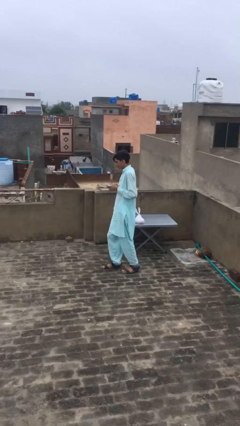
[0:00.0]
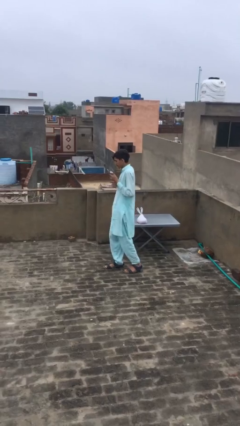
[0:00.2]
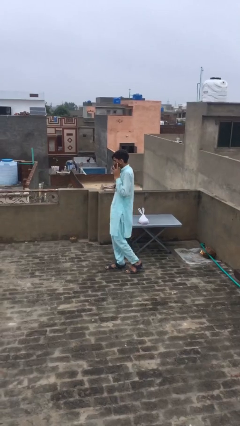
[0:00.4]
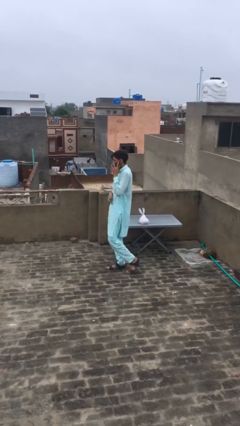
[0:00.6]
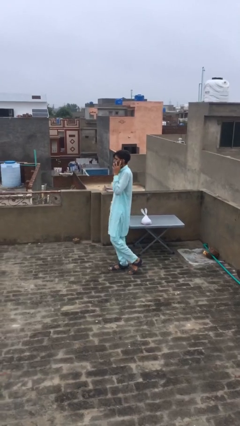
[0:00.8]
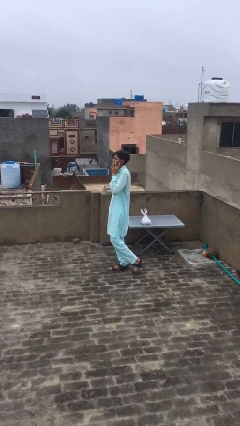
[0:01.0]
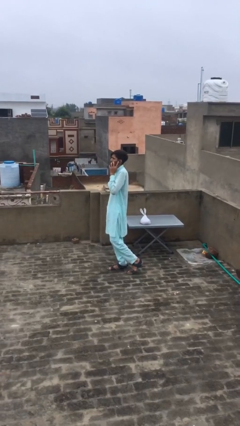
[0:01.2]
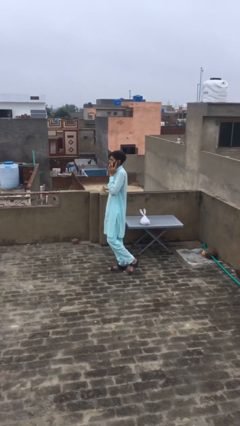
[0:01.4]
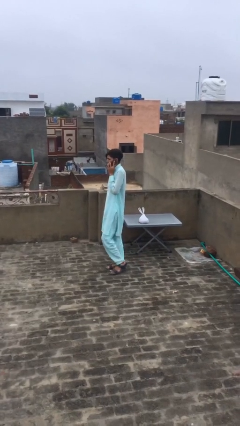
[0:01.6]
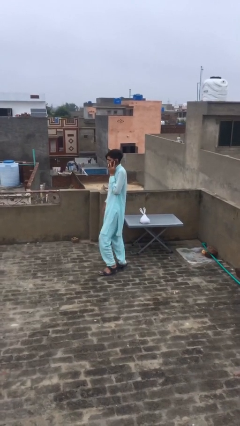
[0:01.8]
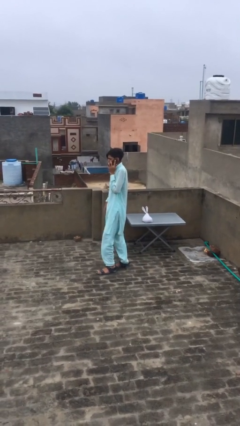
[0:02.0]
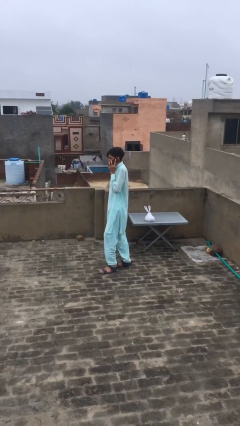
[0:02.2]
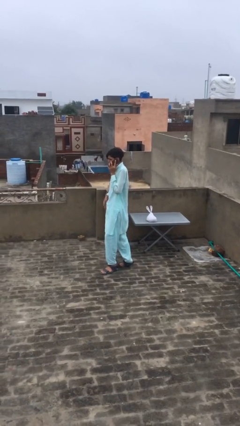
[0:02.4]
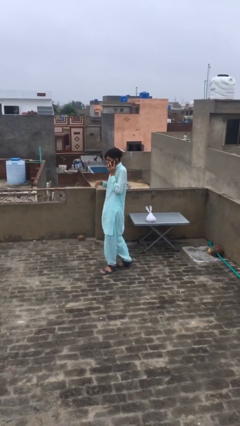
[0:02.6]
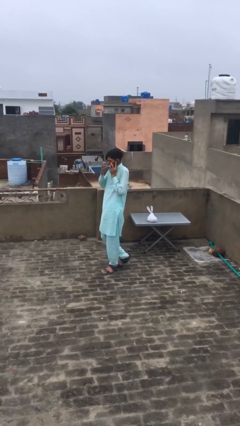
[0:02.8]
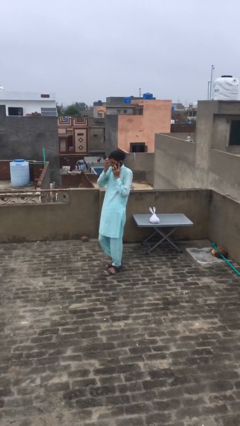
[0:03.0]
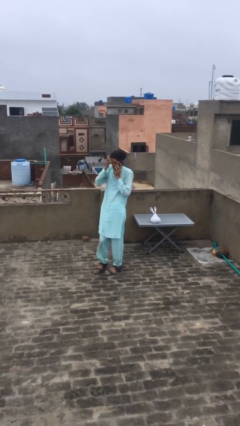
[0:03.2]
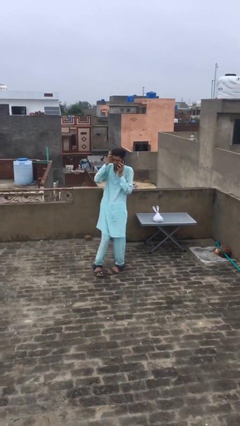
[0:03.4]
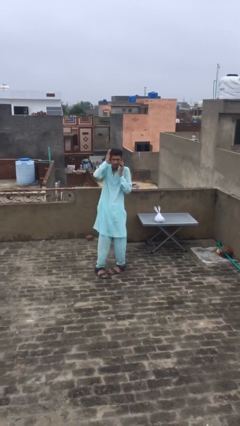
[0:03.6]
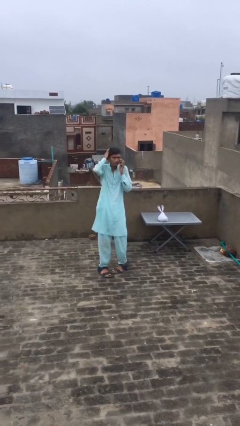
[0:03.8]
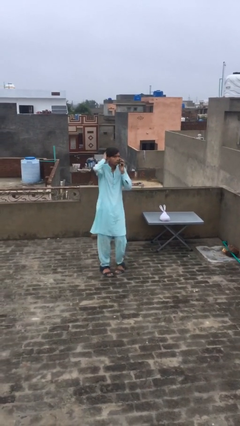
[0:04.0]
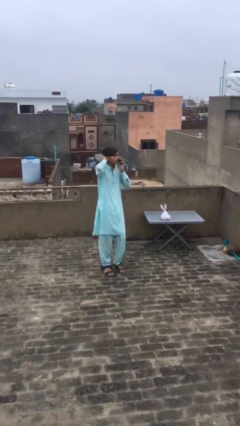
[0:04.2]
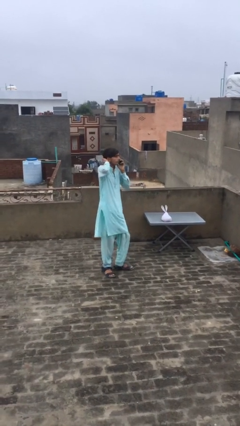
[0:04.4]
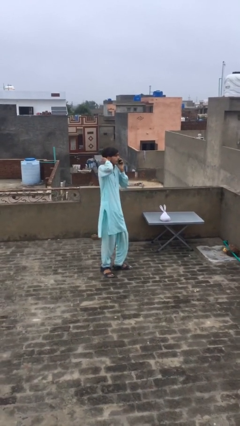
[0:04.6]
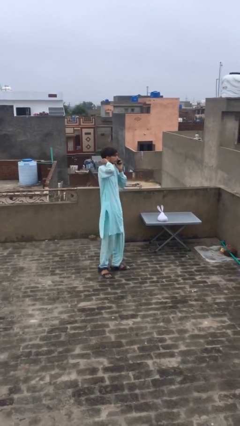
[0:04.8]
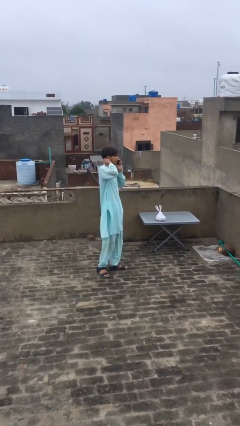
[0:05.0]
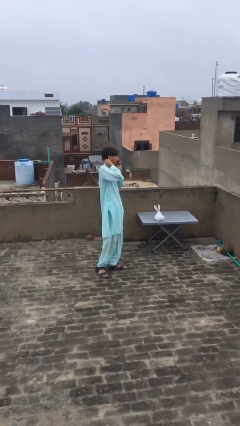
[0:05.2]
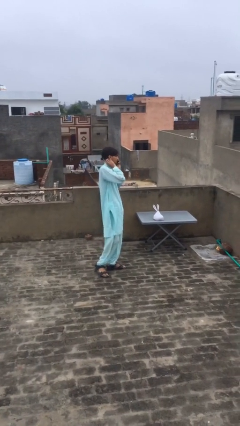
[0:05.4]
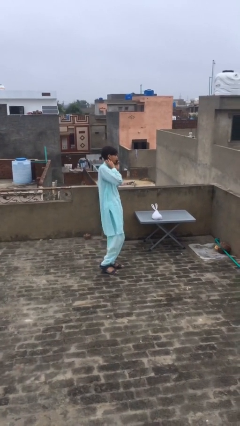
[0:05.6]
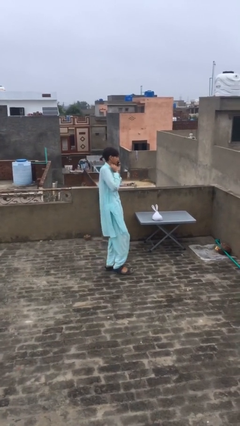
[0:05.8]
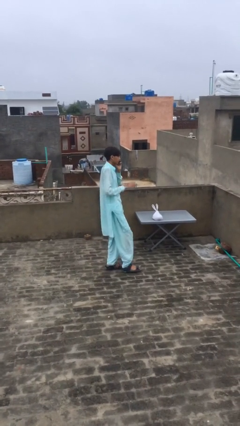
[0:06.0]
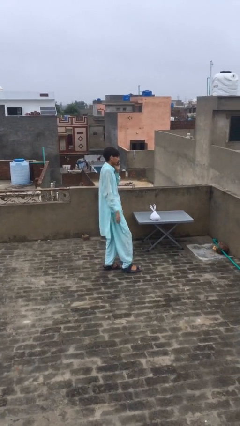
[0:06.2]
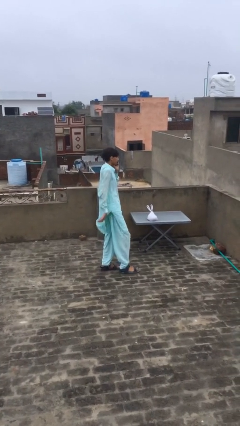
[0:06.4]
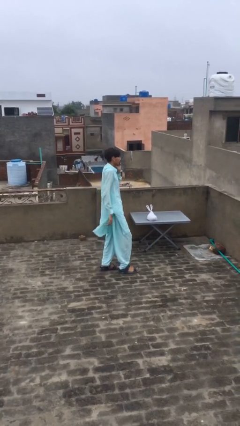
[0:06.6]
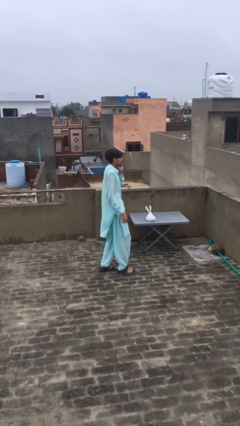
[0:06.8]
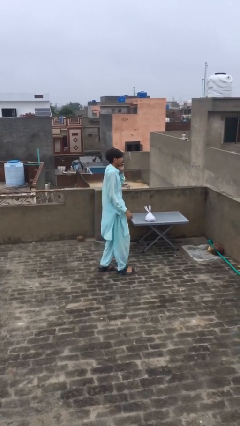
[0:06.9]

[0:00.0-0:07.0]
person talks on phone

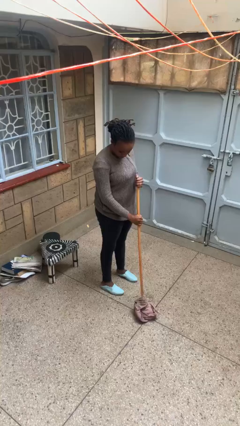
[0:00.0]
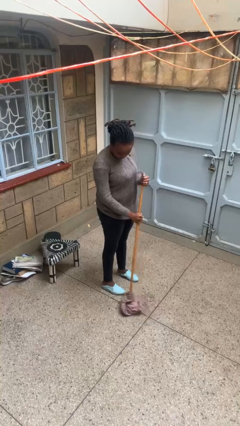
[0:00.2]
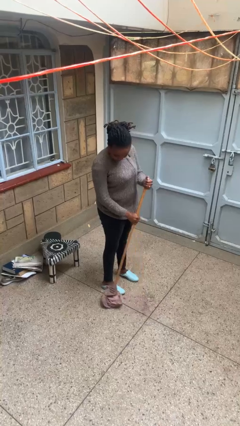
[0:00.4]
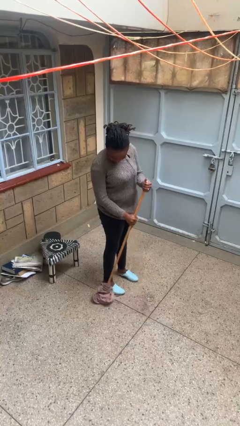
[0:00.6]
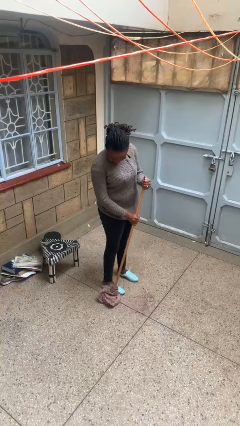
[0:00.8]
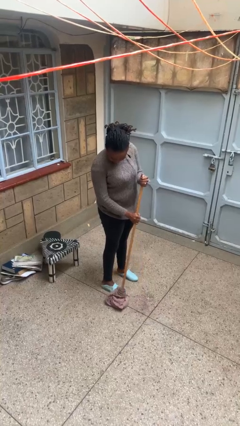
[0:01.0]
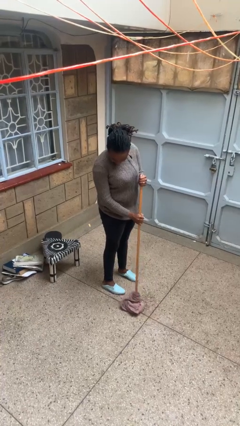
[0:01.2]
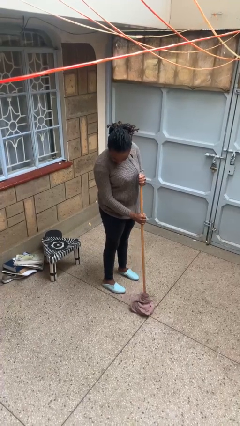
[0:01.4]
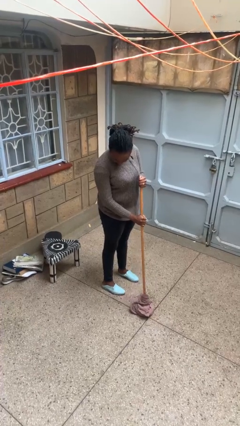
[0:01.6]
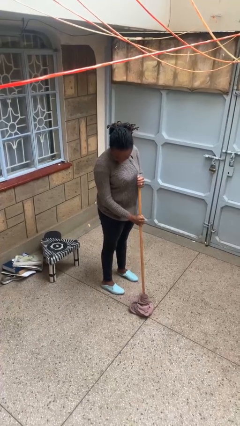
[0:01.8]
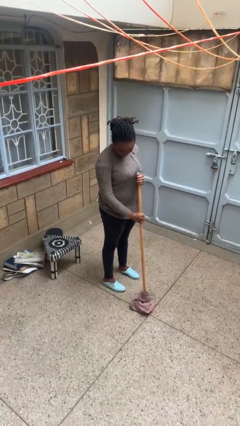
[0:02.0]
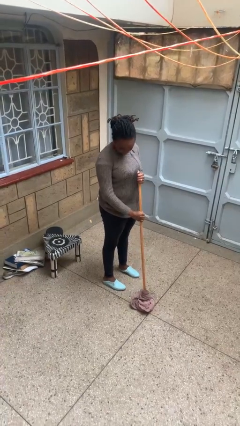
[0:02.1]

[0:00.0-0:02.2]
person mops

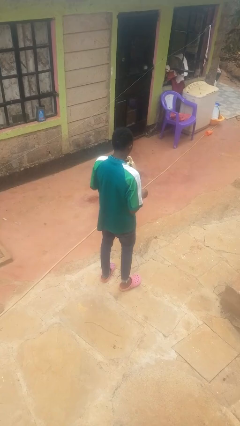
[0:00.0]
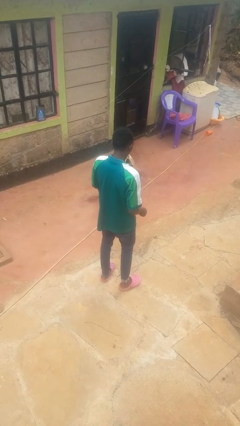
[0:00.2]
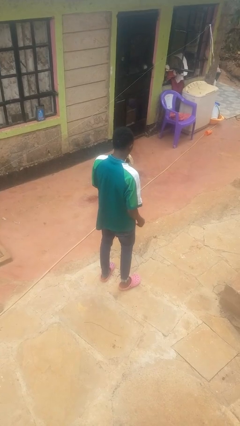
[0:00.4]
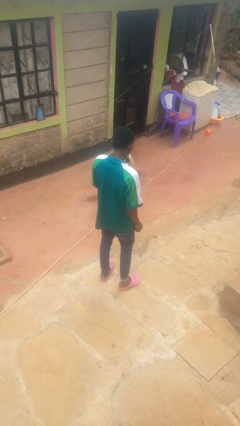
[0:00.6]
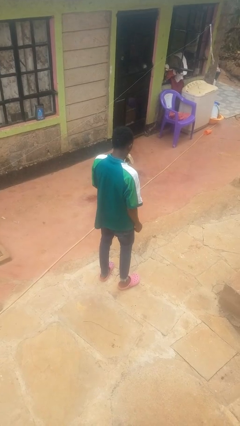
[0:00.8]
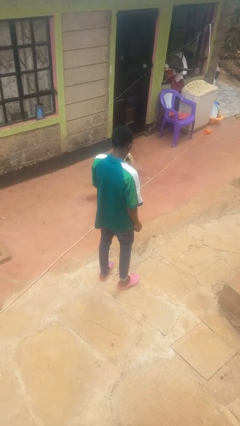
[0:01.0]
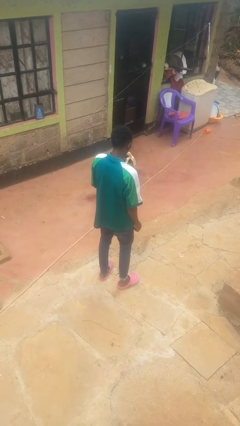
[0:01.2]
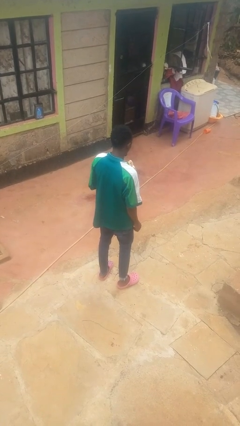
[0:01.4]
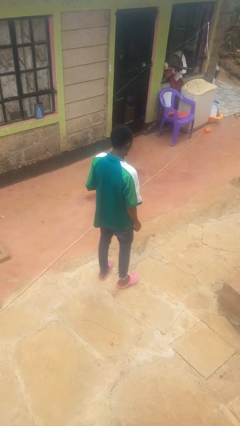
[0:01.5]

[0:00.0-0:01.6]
person eats banana

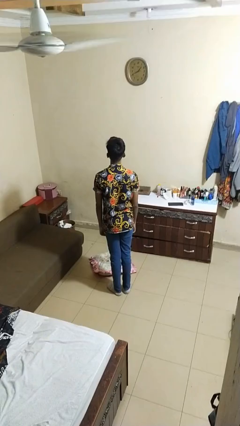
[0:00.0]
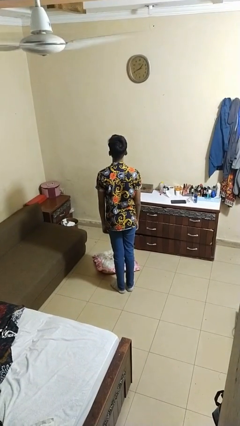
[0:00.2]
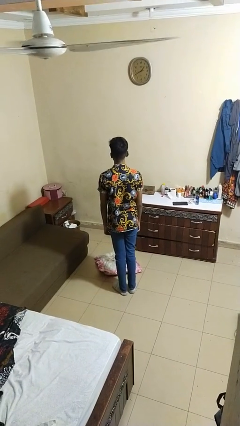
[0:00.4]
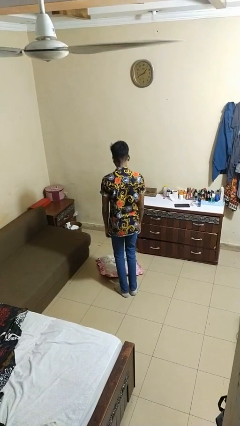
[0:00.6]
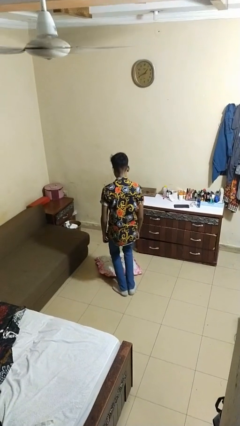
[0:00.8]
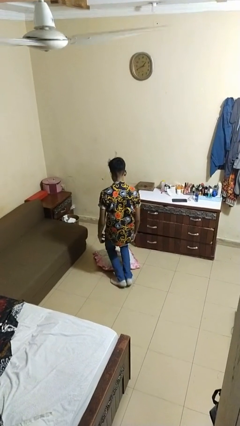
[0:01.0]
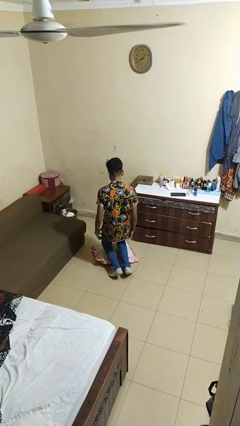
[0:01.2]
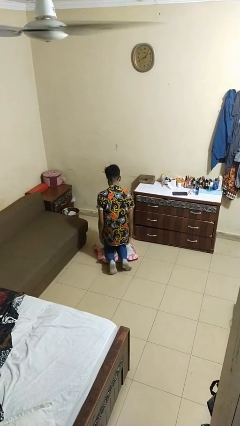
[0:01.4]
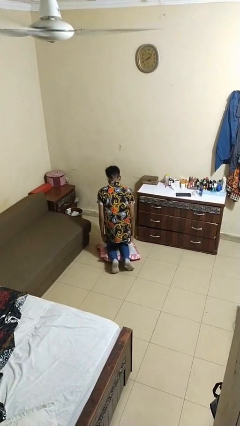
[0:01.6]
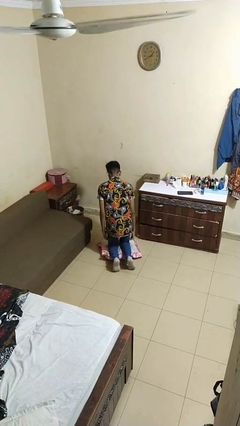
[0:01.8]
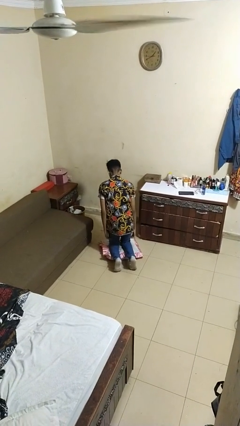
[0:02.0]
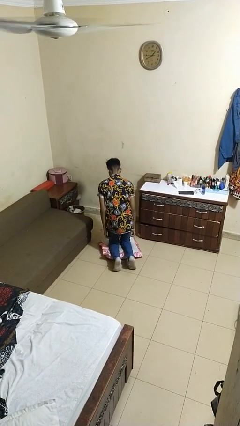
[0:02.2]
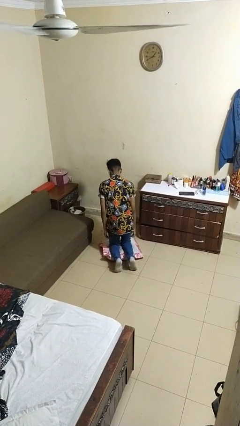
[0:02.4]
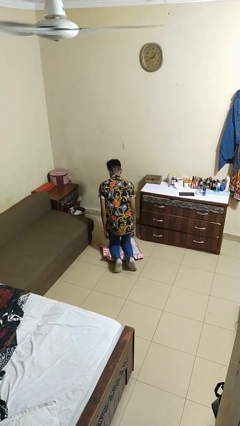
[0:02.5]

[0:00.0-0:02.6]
person kneels

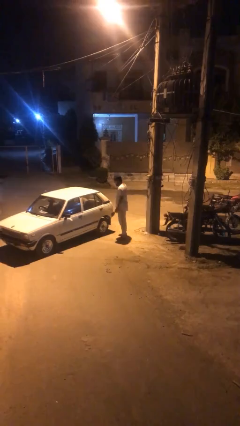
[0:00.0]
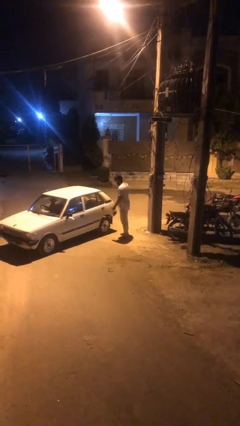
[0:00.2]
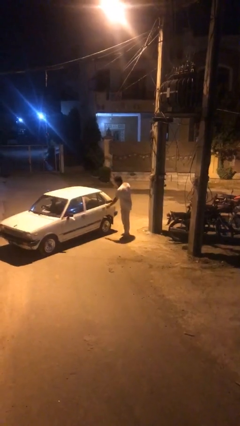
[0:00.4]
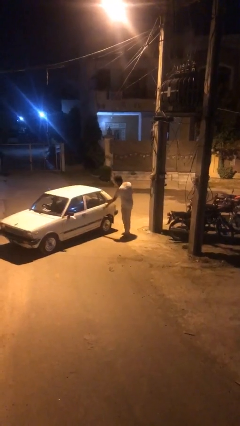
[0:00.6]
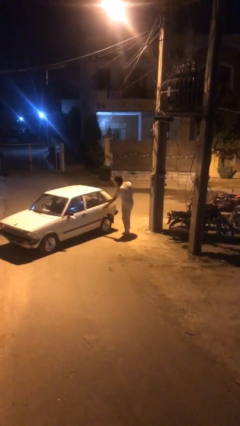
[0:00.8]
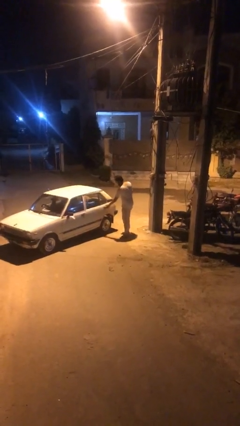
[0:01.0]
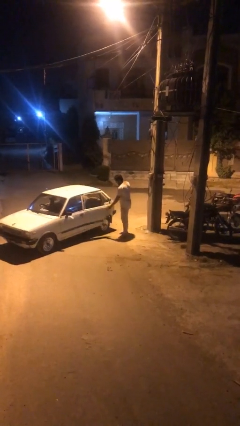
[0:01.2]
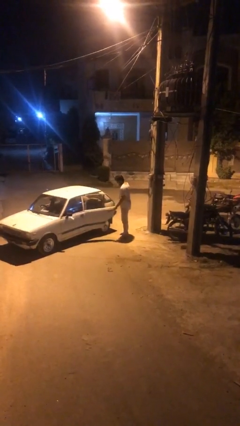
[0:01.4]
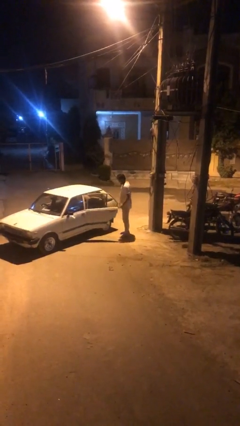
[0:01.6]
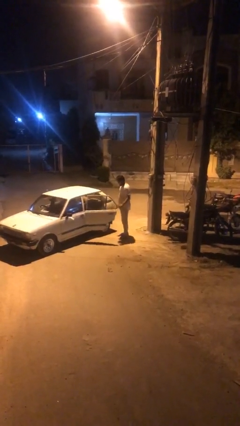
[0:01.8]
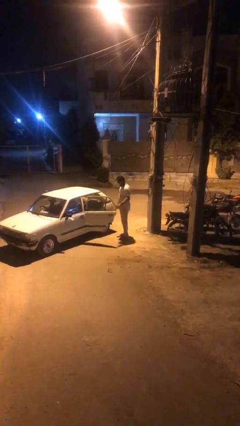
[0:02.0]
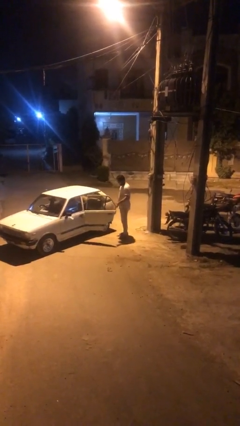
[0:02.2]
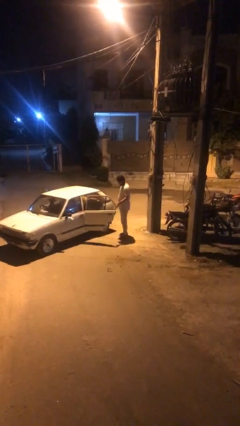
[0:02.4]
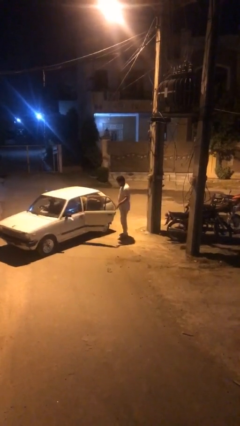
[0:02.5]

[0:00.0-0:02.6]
person opens car door

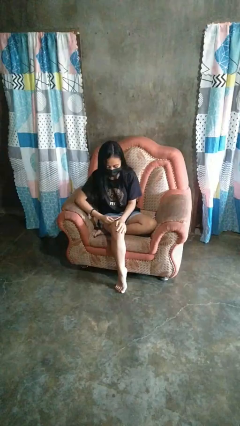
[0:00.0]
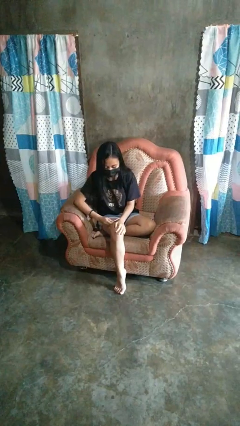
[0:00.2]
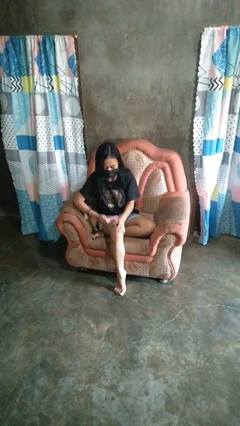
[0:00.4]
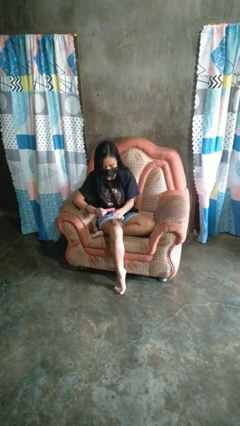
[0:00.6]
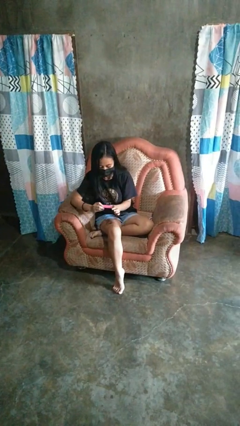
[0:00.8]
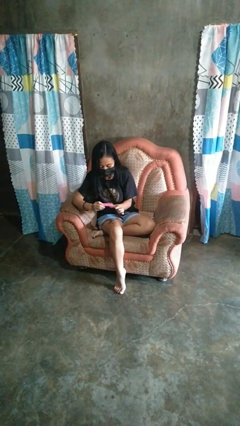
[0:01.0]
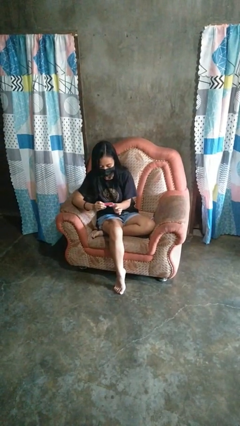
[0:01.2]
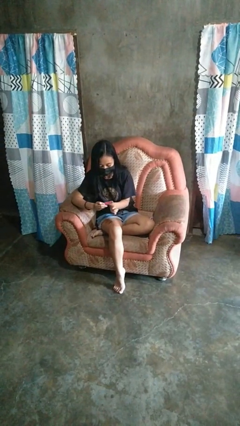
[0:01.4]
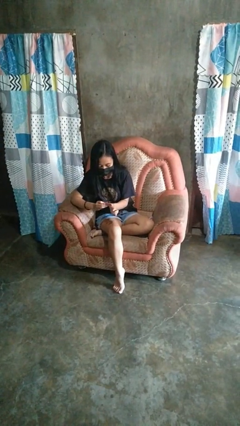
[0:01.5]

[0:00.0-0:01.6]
person files fingernails
